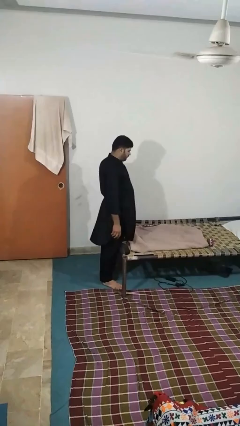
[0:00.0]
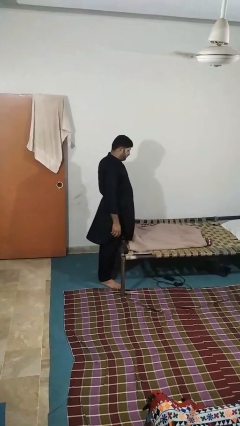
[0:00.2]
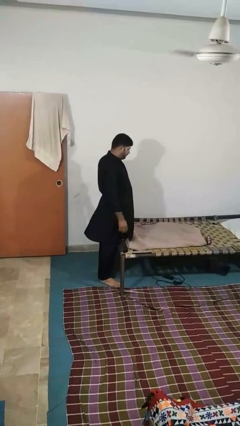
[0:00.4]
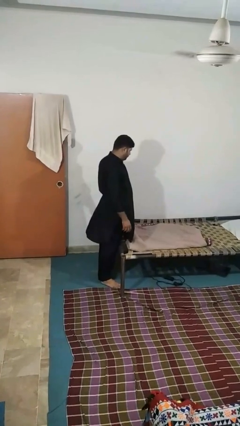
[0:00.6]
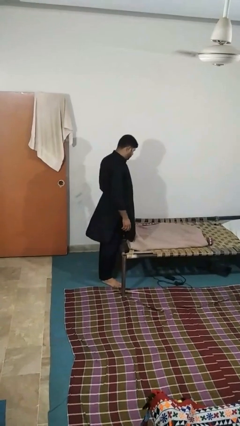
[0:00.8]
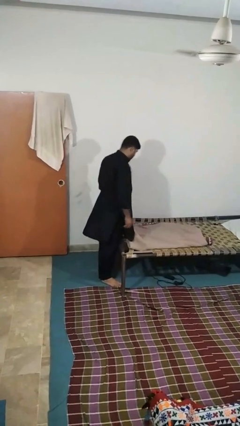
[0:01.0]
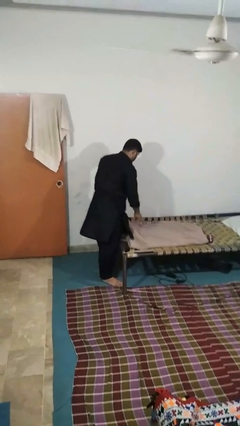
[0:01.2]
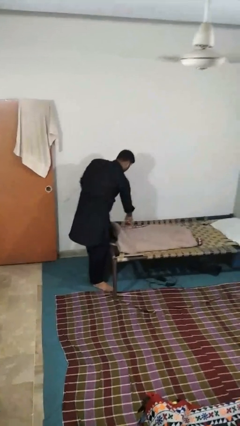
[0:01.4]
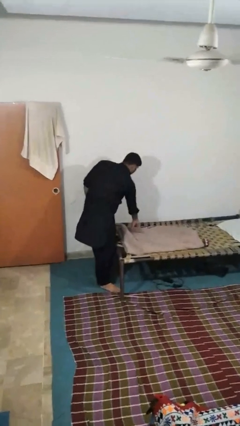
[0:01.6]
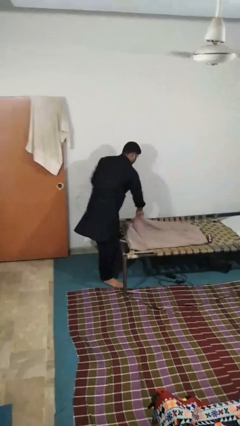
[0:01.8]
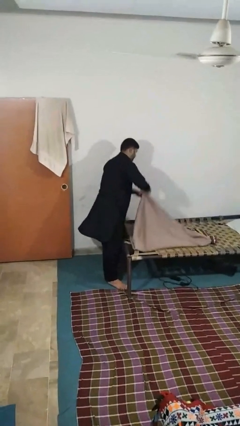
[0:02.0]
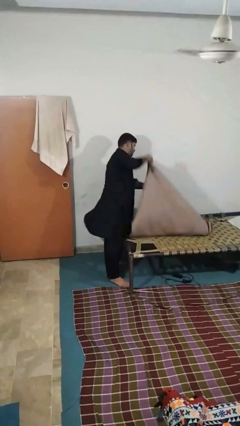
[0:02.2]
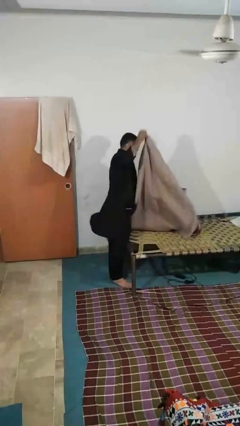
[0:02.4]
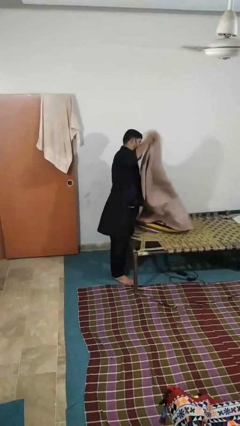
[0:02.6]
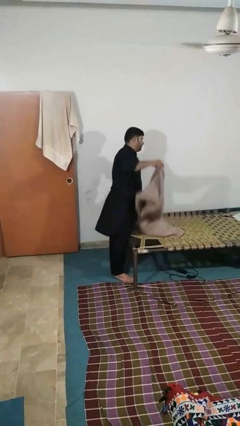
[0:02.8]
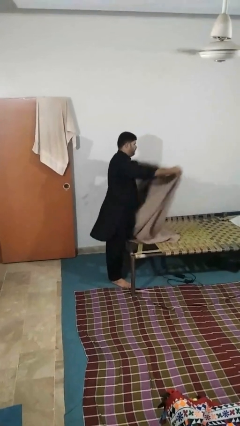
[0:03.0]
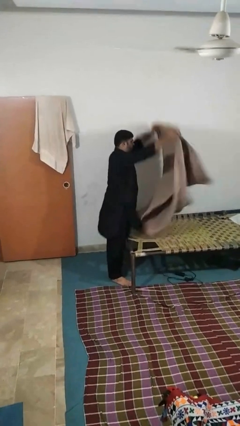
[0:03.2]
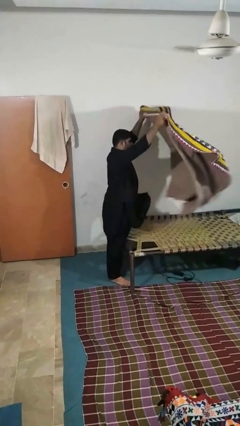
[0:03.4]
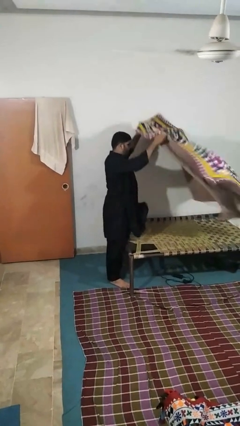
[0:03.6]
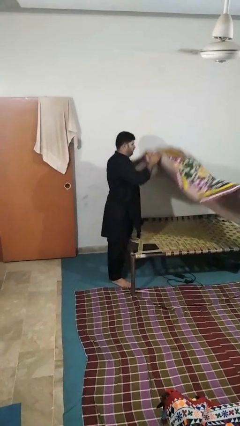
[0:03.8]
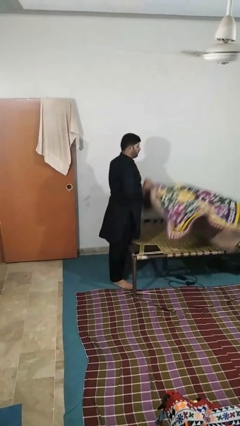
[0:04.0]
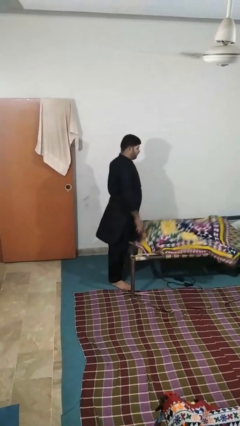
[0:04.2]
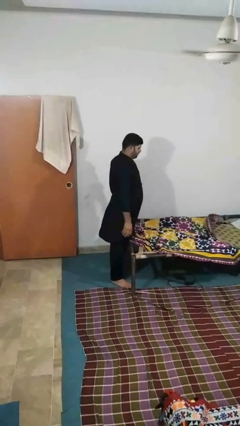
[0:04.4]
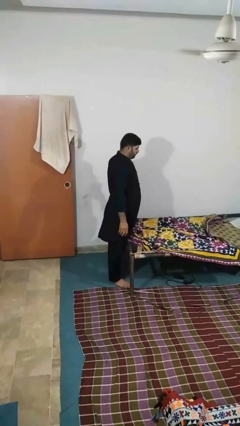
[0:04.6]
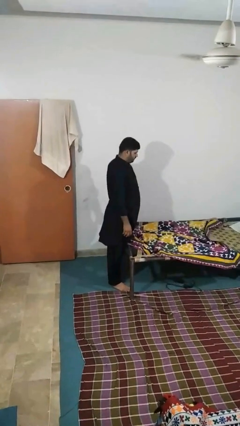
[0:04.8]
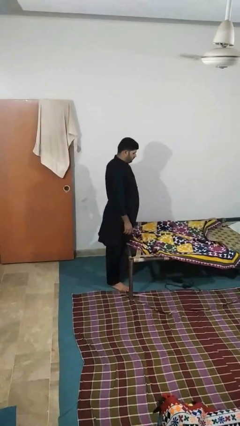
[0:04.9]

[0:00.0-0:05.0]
person unfolds blanket

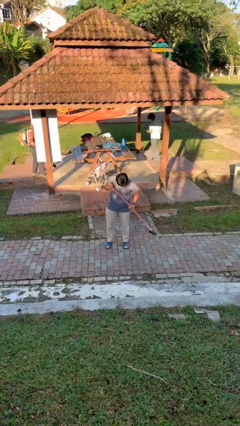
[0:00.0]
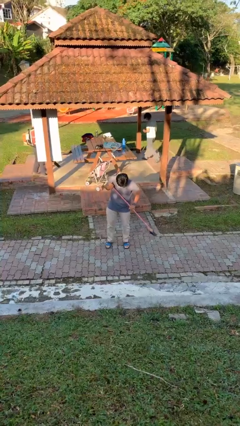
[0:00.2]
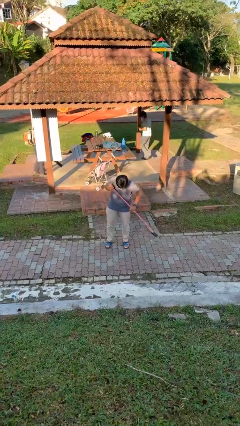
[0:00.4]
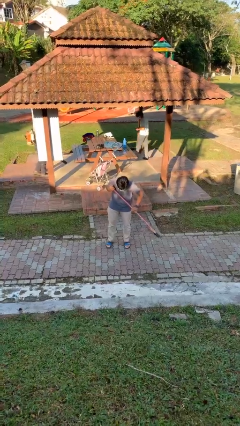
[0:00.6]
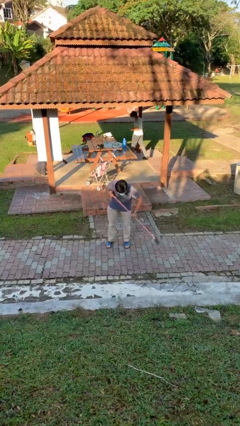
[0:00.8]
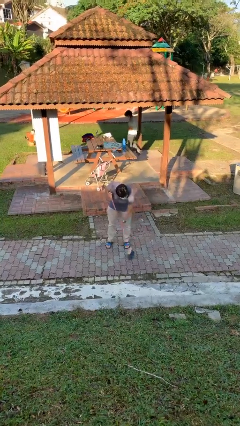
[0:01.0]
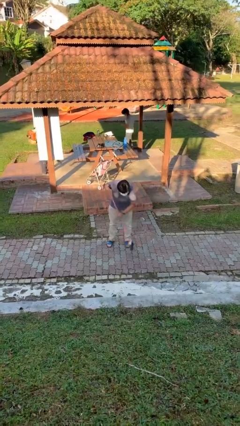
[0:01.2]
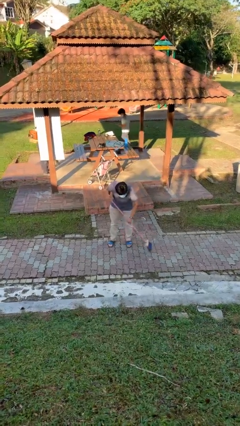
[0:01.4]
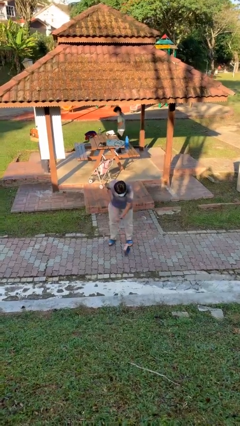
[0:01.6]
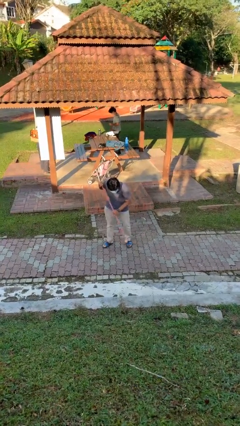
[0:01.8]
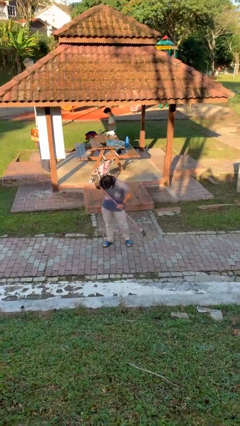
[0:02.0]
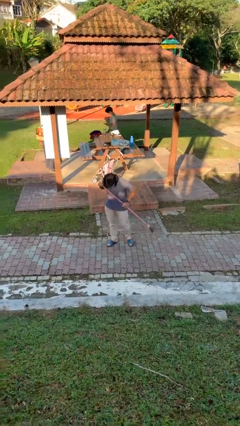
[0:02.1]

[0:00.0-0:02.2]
person sweeps floor

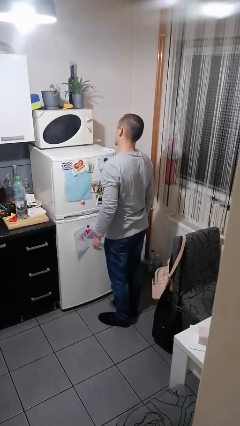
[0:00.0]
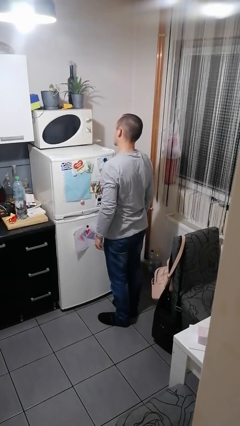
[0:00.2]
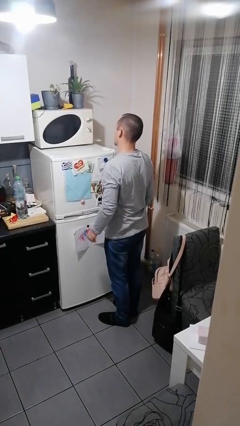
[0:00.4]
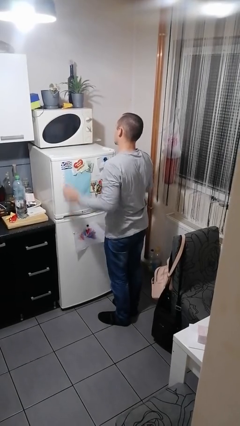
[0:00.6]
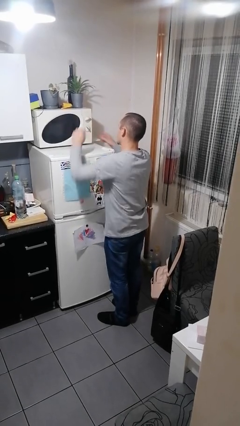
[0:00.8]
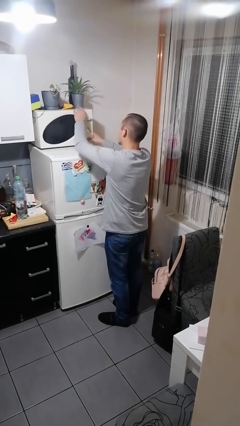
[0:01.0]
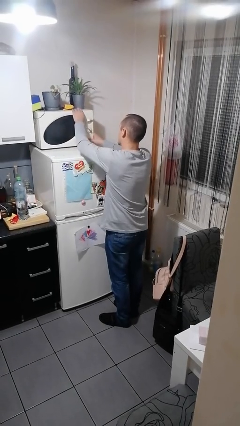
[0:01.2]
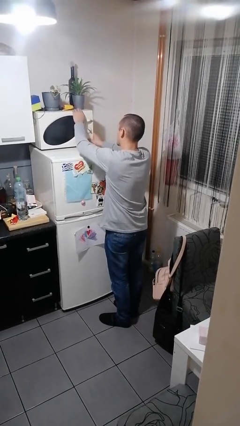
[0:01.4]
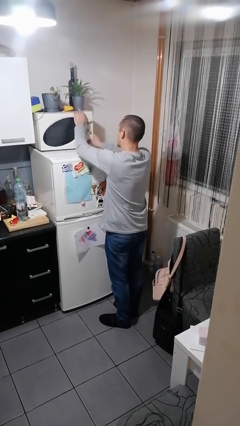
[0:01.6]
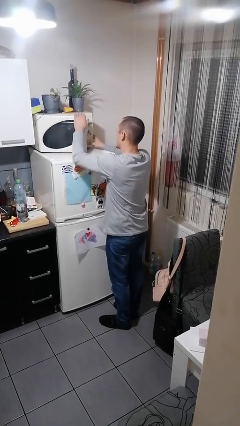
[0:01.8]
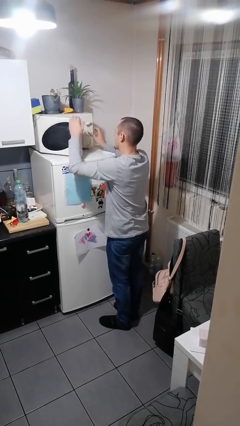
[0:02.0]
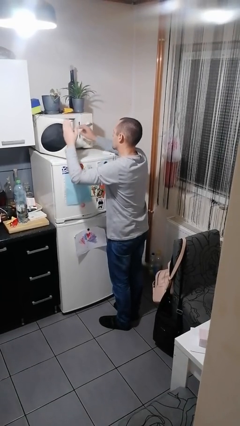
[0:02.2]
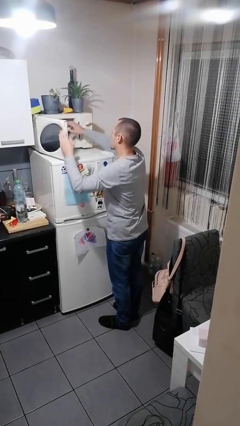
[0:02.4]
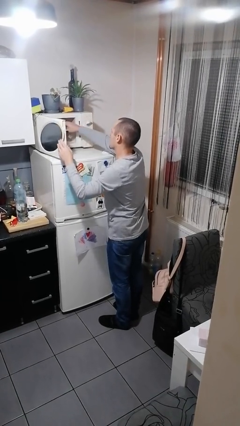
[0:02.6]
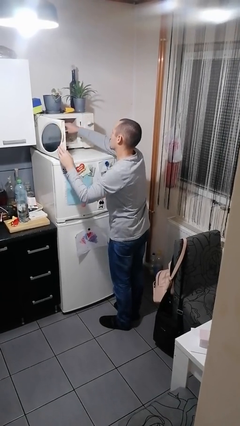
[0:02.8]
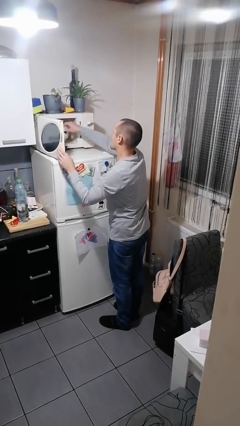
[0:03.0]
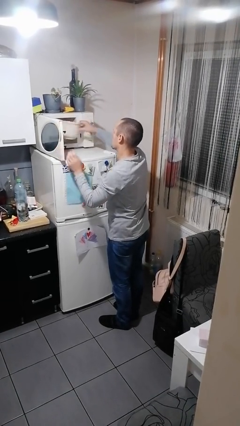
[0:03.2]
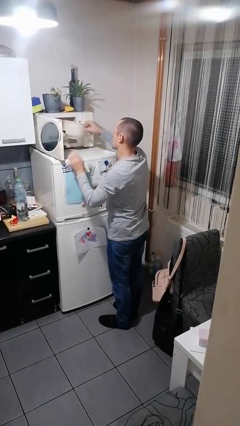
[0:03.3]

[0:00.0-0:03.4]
person takes object from microwave

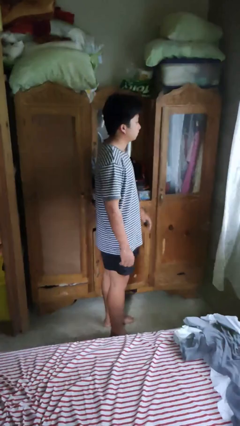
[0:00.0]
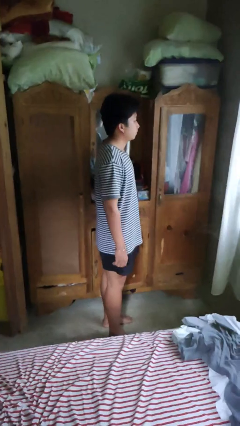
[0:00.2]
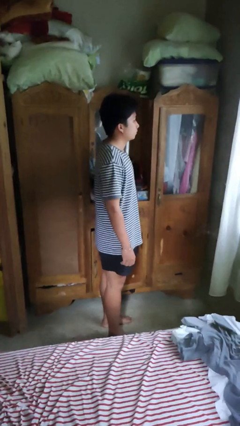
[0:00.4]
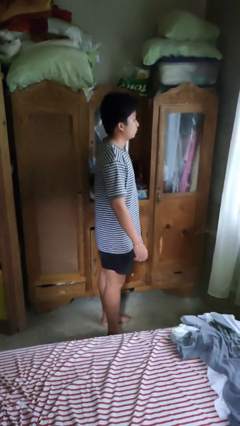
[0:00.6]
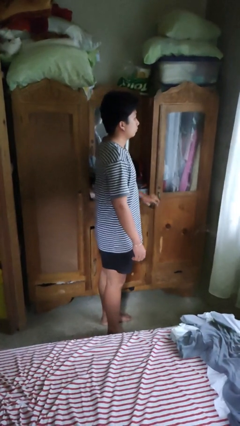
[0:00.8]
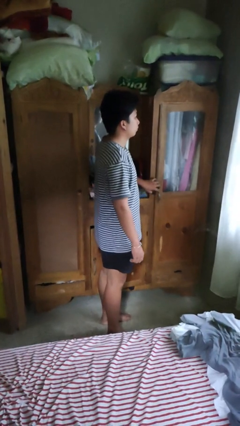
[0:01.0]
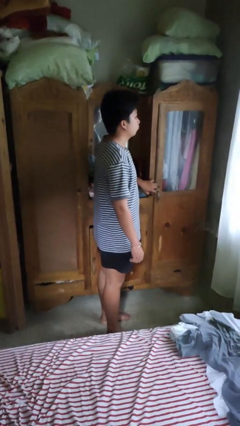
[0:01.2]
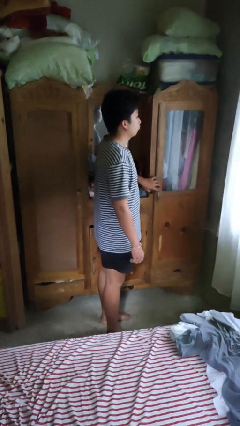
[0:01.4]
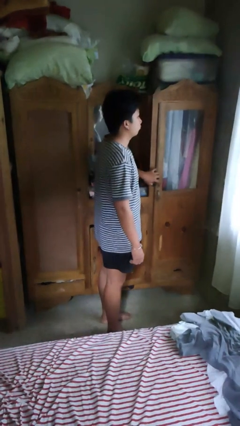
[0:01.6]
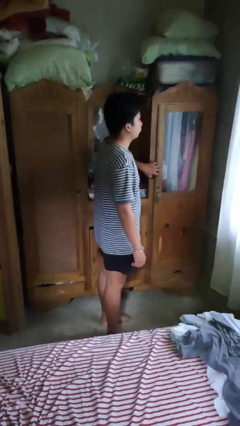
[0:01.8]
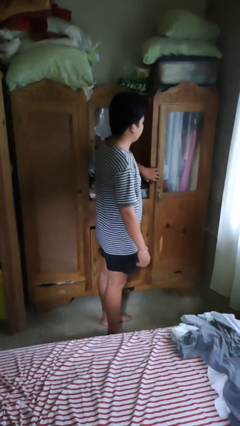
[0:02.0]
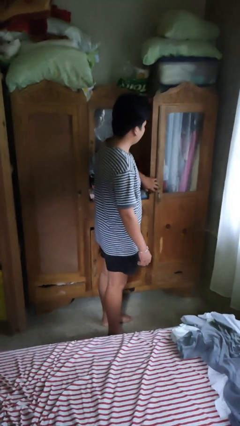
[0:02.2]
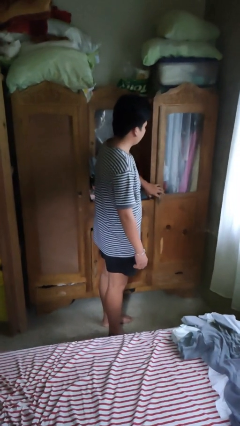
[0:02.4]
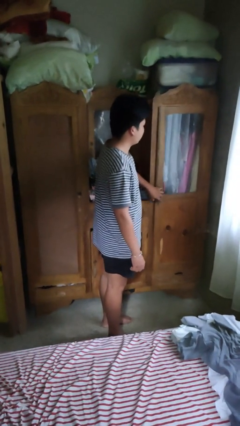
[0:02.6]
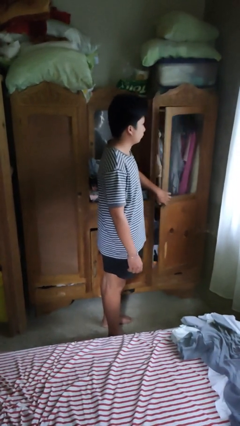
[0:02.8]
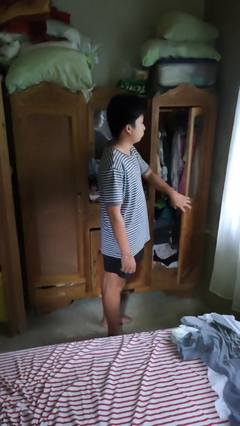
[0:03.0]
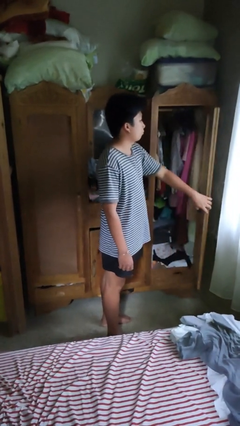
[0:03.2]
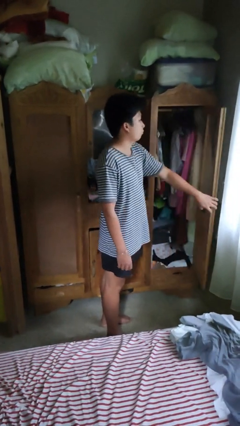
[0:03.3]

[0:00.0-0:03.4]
person opens closet door

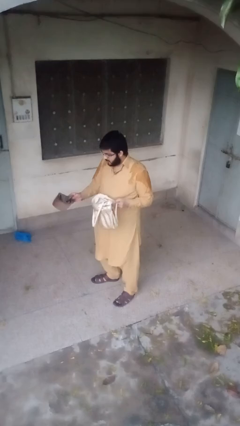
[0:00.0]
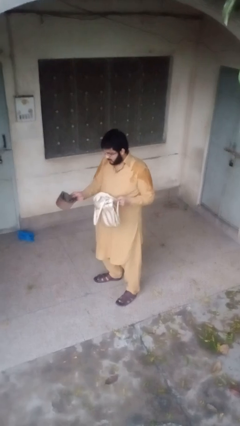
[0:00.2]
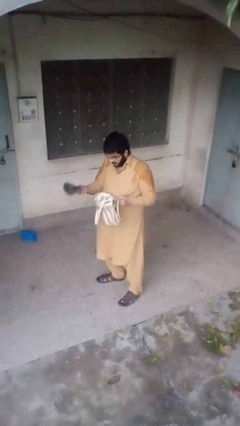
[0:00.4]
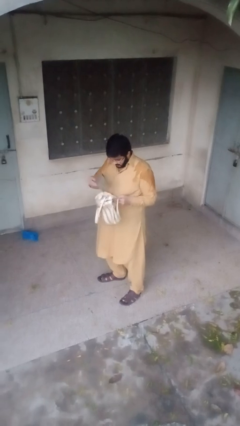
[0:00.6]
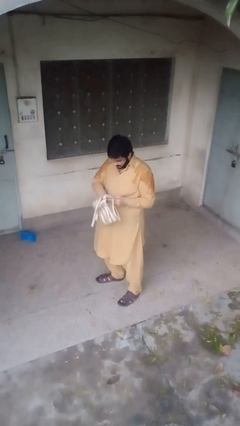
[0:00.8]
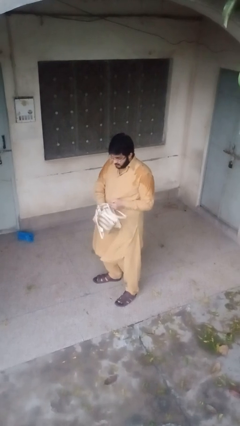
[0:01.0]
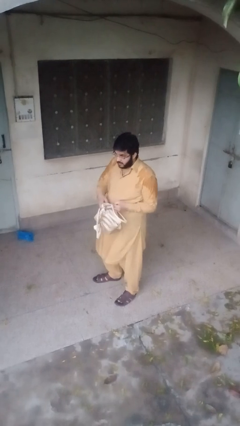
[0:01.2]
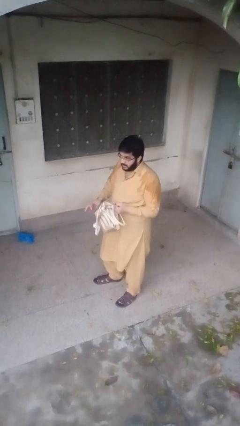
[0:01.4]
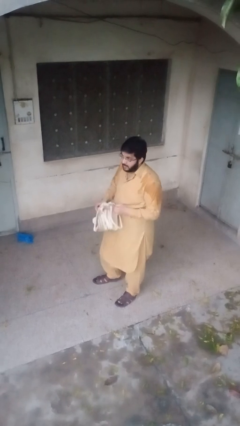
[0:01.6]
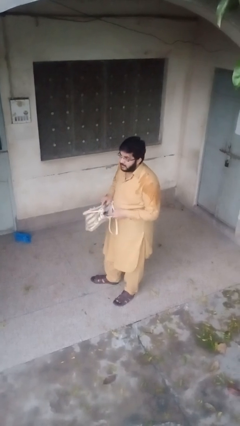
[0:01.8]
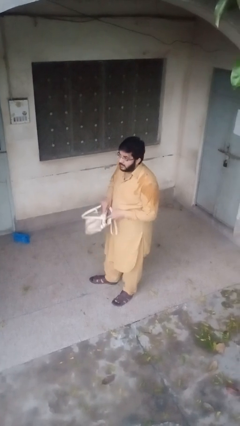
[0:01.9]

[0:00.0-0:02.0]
person puts object into purse

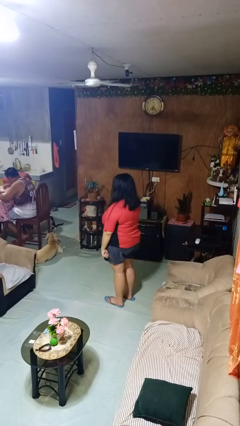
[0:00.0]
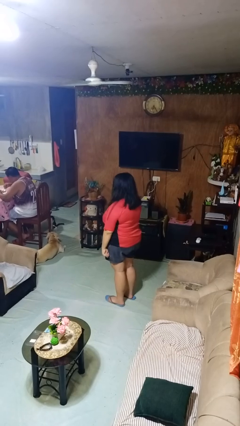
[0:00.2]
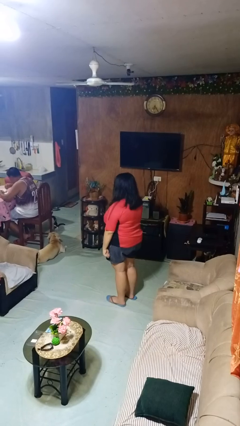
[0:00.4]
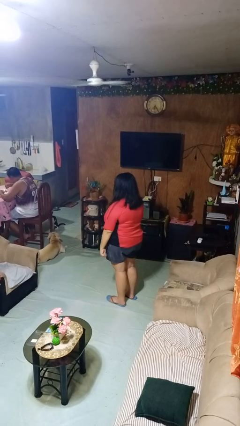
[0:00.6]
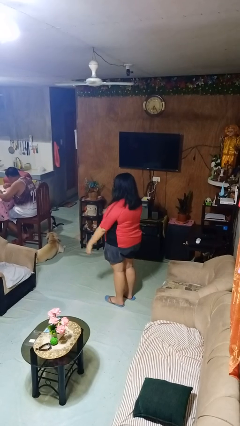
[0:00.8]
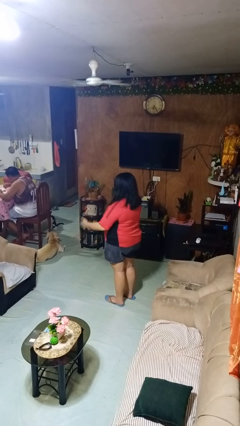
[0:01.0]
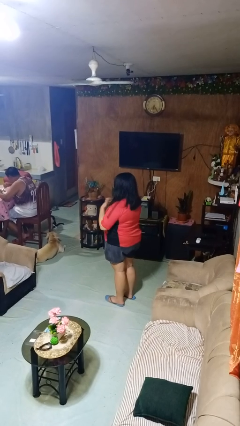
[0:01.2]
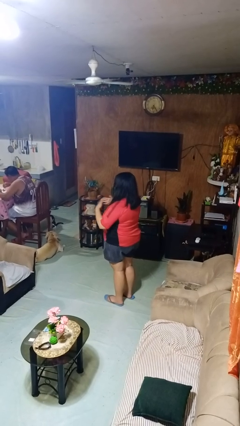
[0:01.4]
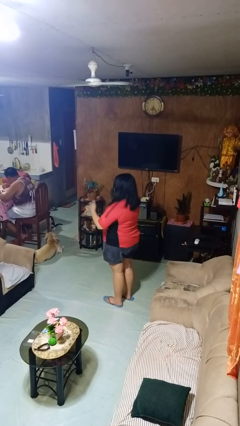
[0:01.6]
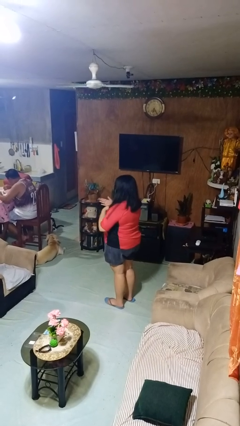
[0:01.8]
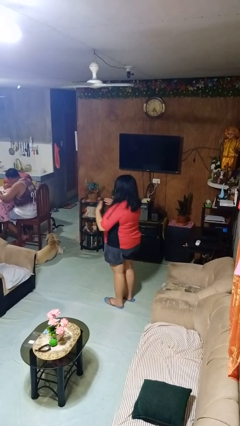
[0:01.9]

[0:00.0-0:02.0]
person drums on chest
